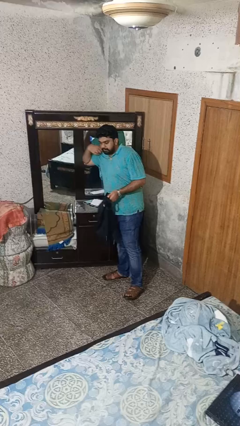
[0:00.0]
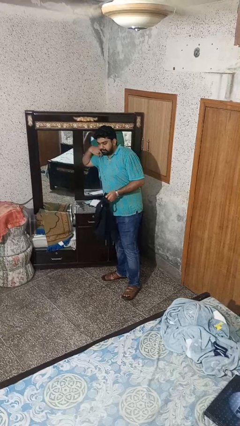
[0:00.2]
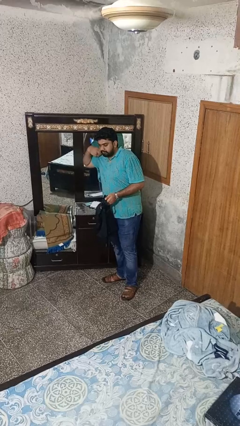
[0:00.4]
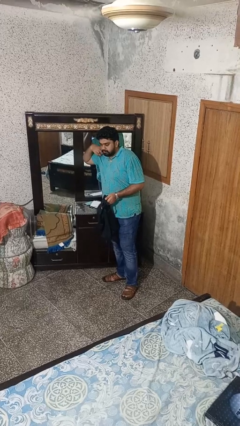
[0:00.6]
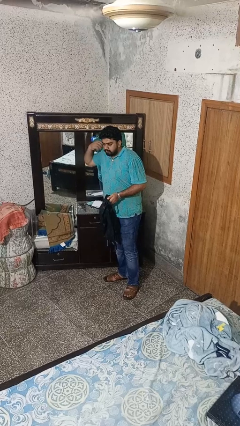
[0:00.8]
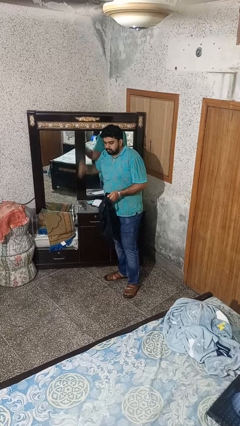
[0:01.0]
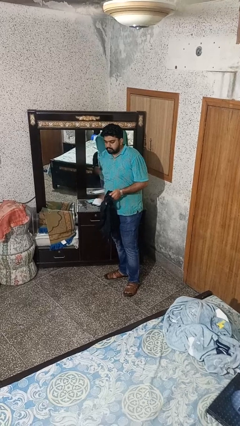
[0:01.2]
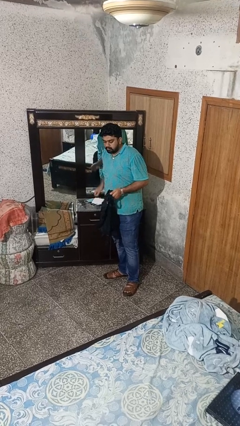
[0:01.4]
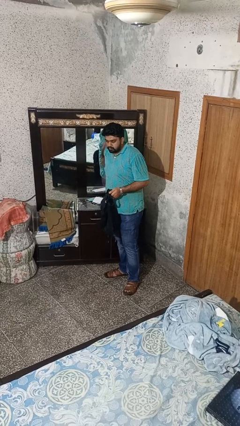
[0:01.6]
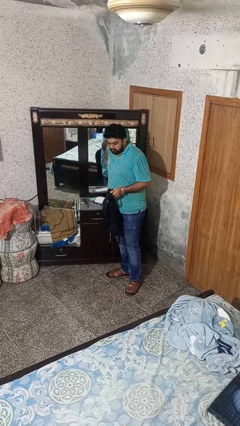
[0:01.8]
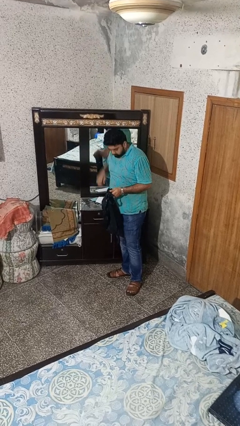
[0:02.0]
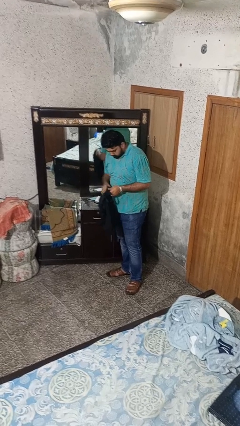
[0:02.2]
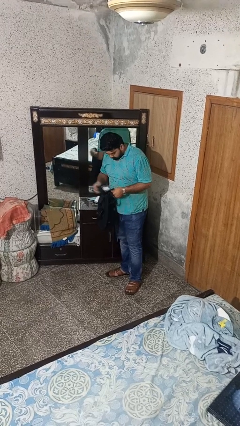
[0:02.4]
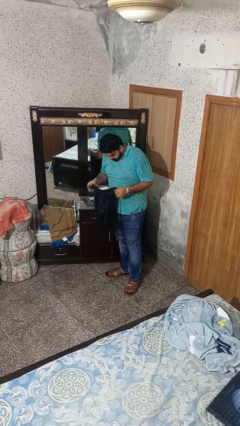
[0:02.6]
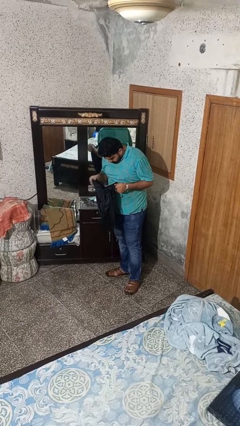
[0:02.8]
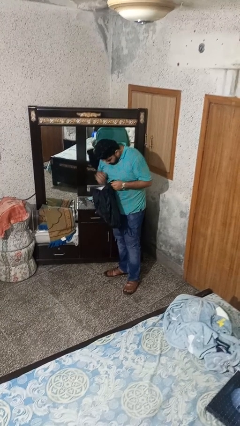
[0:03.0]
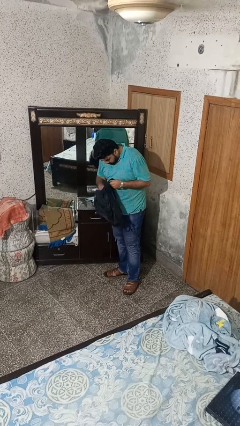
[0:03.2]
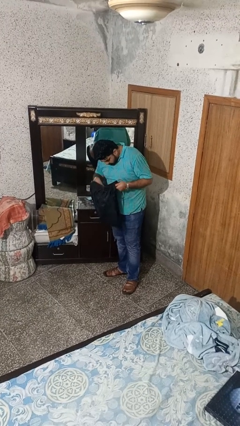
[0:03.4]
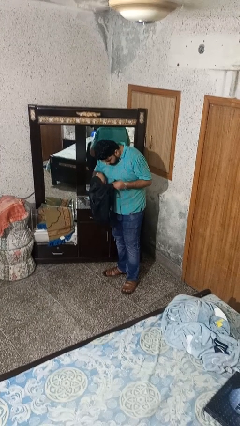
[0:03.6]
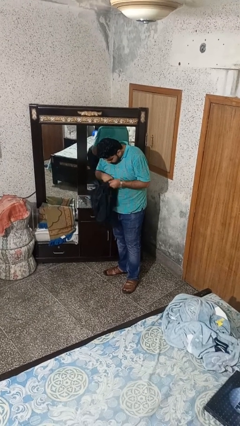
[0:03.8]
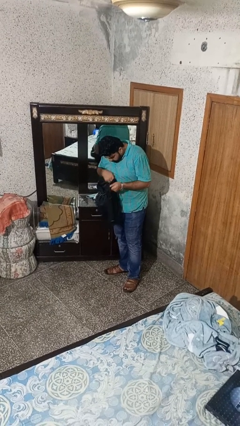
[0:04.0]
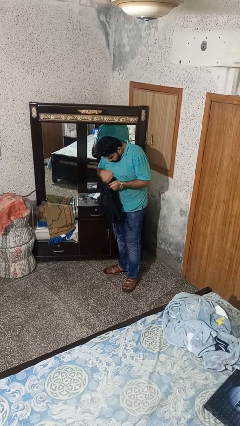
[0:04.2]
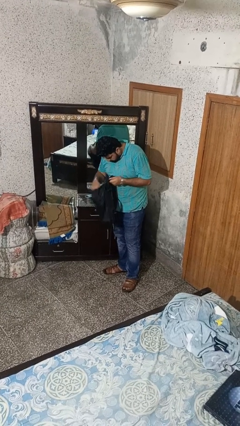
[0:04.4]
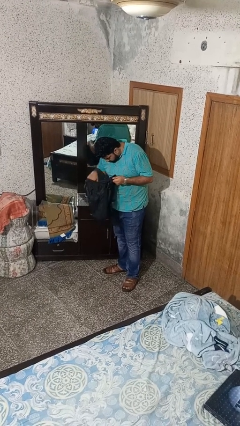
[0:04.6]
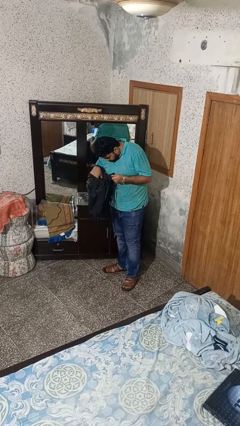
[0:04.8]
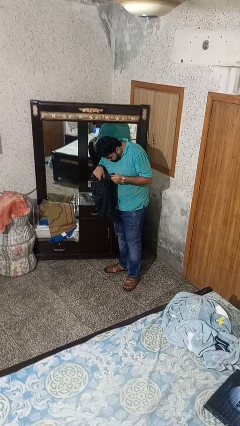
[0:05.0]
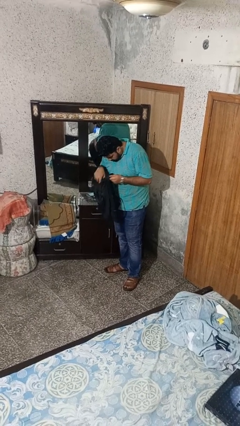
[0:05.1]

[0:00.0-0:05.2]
person searches in backpack

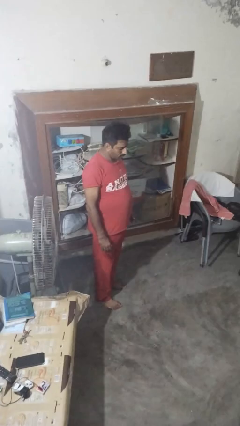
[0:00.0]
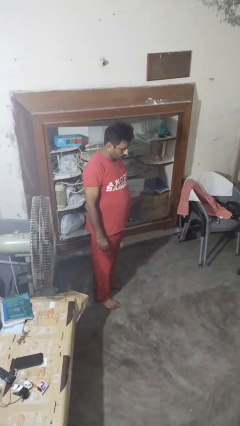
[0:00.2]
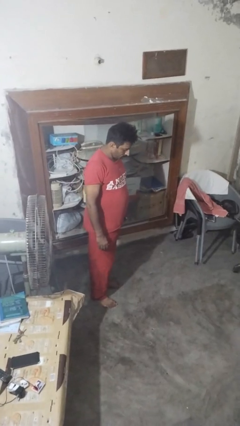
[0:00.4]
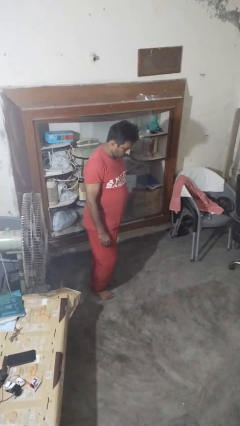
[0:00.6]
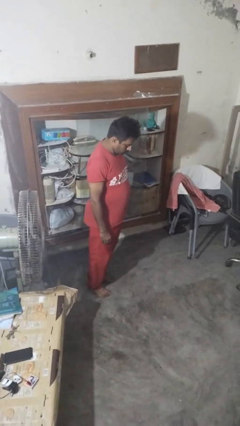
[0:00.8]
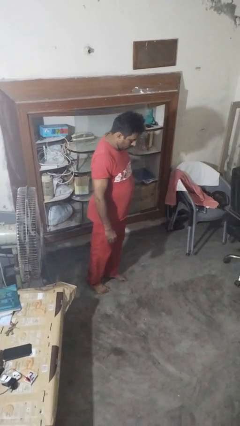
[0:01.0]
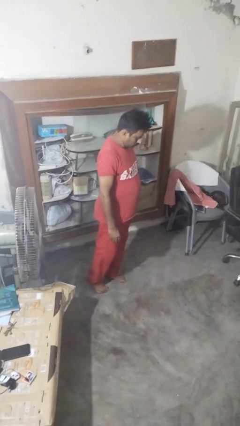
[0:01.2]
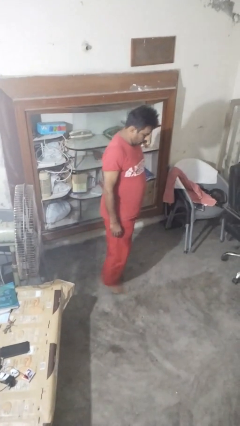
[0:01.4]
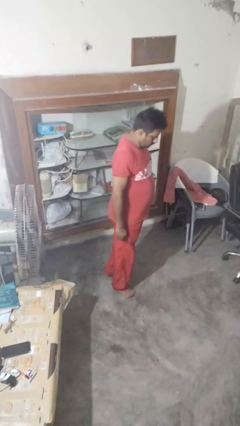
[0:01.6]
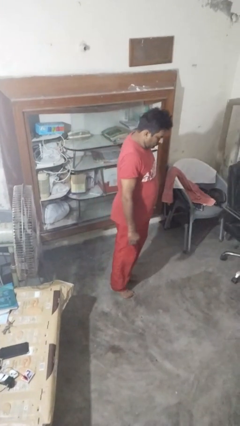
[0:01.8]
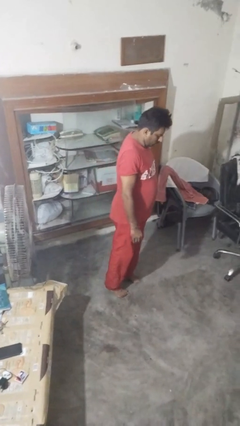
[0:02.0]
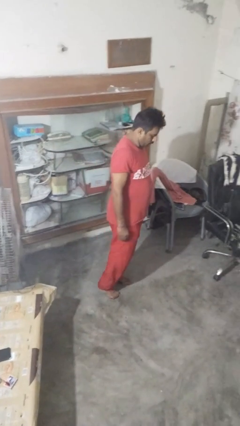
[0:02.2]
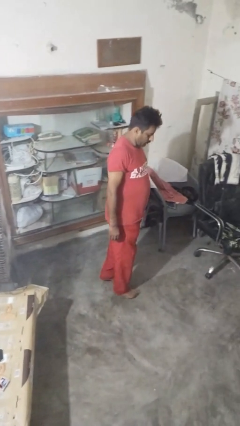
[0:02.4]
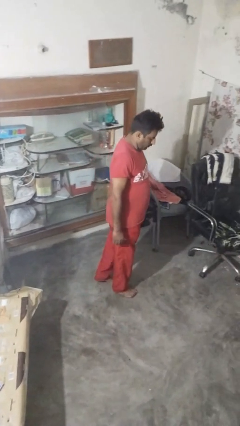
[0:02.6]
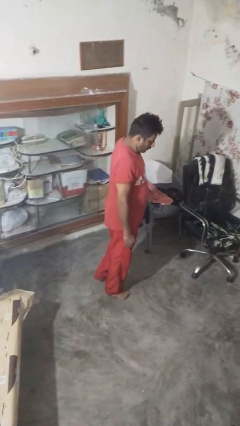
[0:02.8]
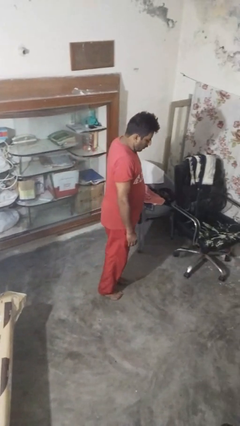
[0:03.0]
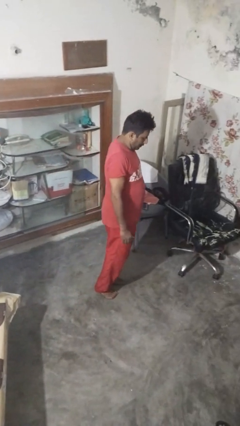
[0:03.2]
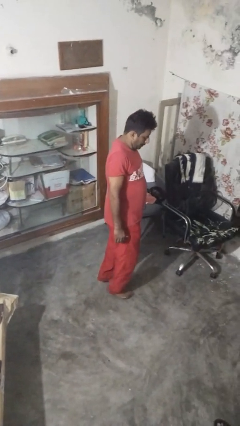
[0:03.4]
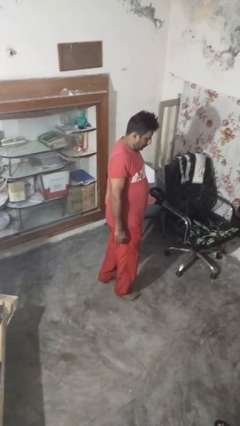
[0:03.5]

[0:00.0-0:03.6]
person walks tiptoe

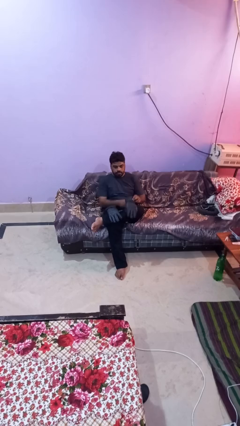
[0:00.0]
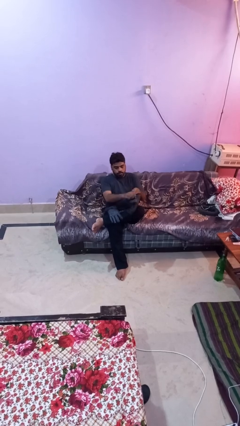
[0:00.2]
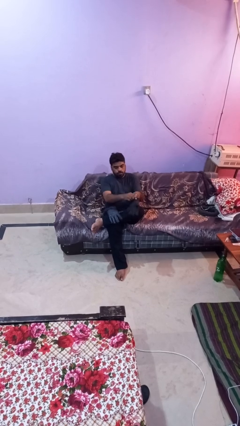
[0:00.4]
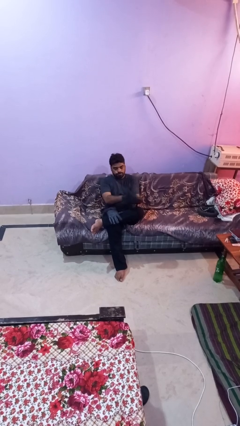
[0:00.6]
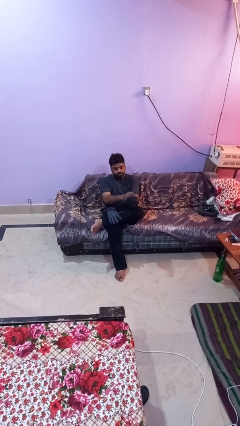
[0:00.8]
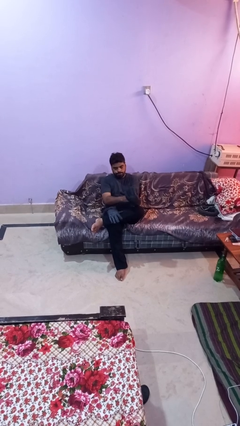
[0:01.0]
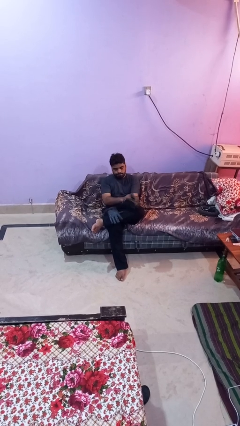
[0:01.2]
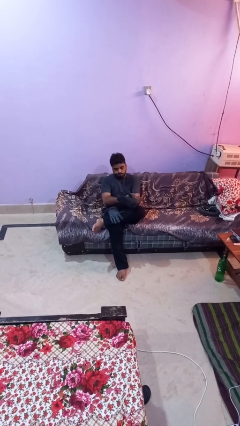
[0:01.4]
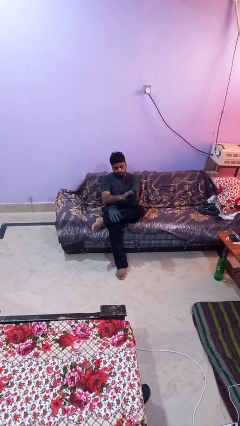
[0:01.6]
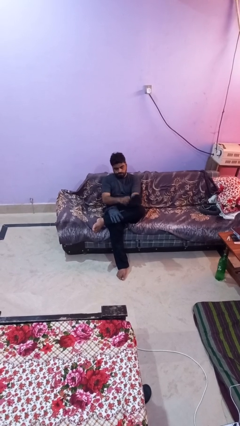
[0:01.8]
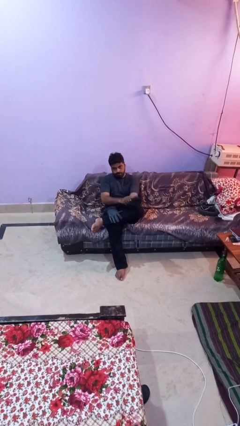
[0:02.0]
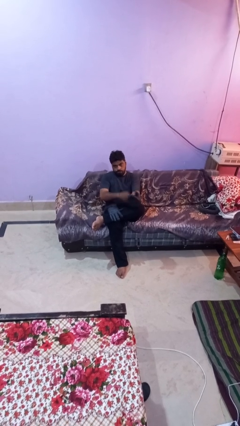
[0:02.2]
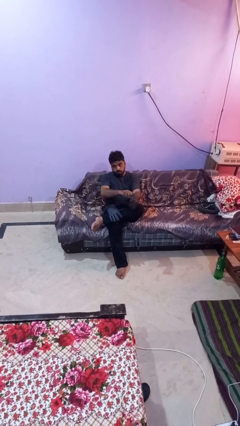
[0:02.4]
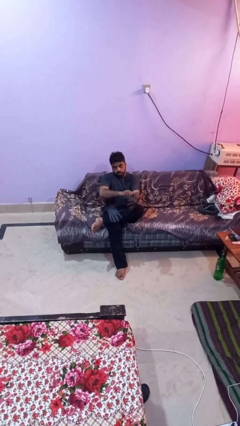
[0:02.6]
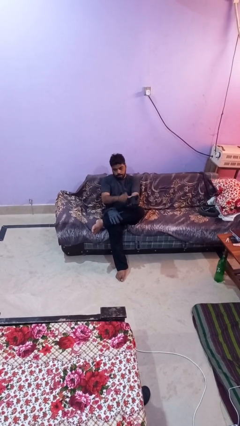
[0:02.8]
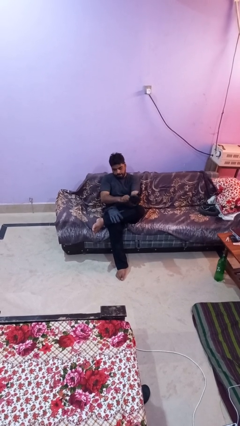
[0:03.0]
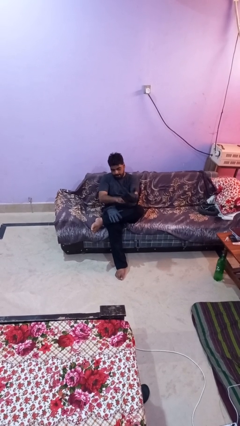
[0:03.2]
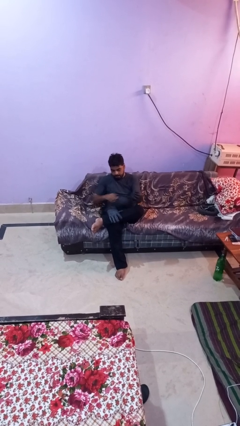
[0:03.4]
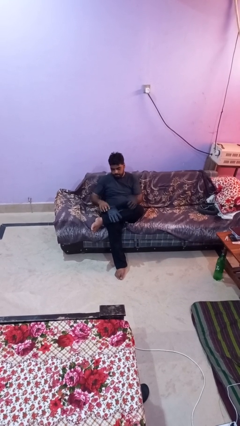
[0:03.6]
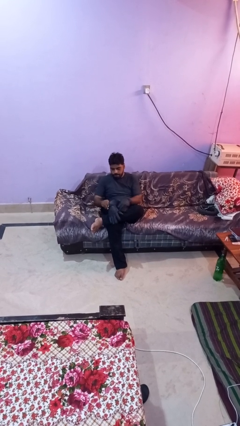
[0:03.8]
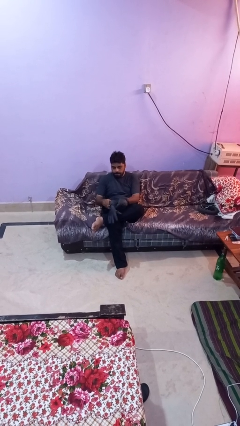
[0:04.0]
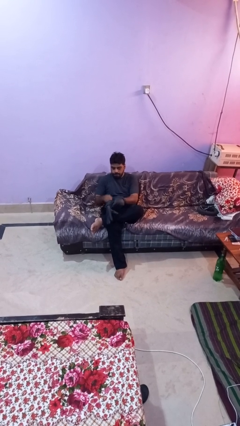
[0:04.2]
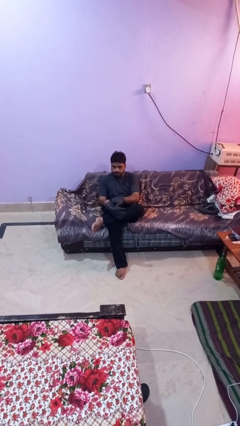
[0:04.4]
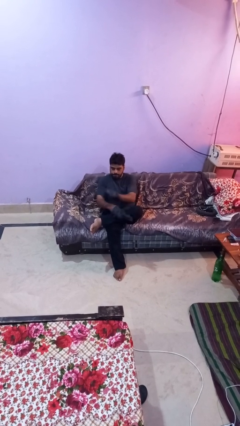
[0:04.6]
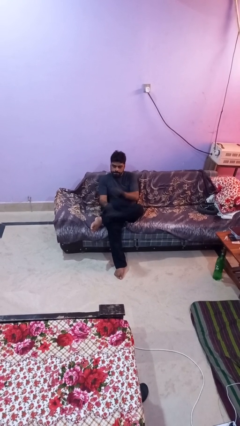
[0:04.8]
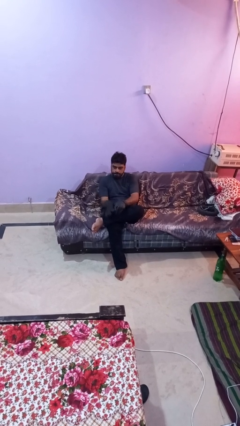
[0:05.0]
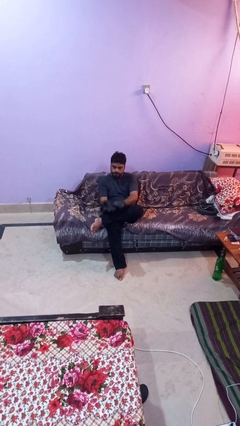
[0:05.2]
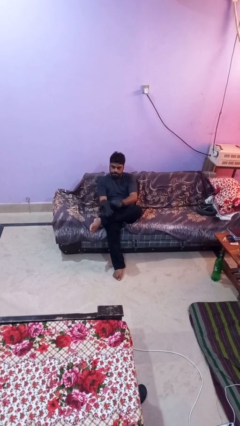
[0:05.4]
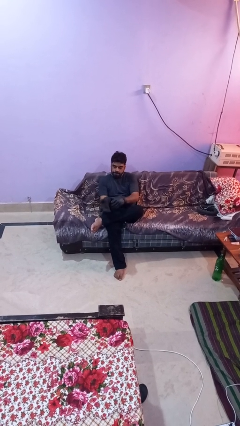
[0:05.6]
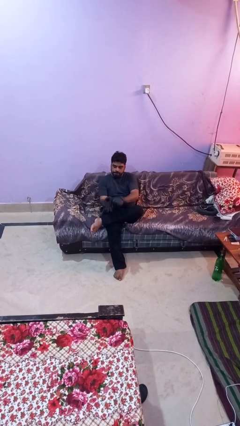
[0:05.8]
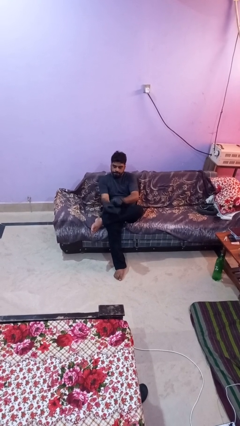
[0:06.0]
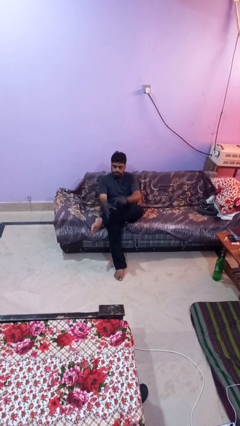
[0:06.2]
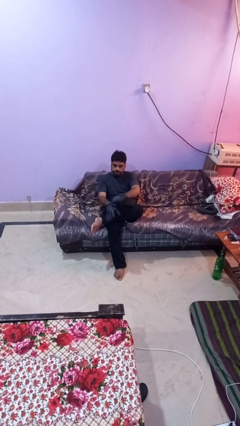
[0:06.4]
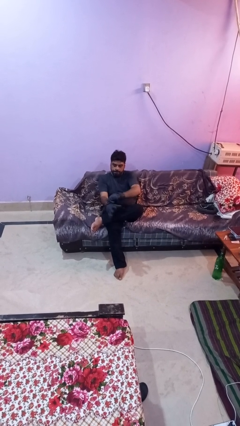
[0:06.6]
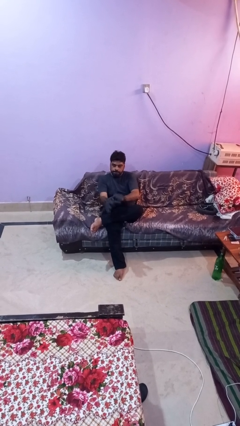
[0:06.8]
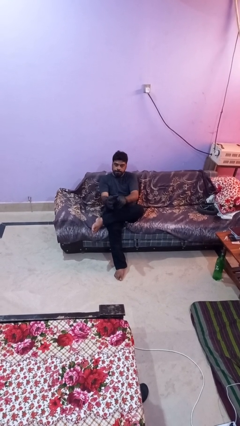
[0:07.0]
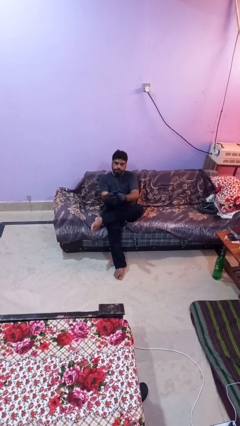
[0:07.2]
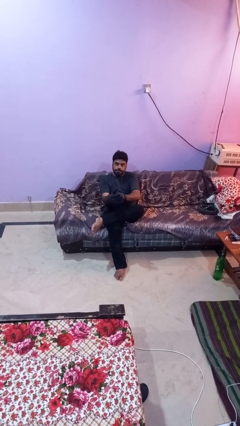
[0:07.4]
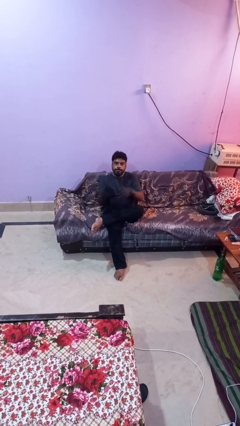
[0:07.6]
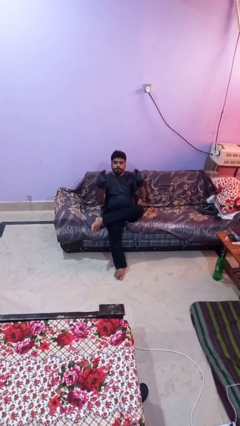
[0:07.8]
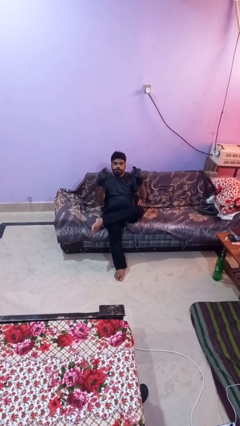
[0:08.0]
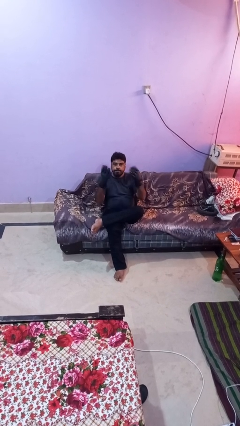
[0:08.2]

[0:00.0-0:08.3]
person puts on gloves

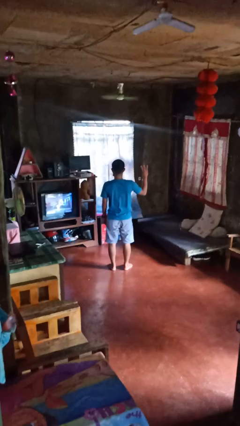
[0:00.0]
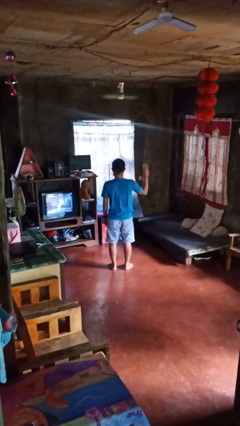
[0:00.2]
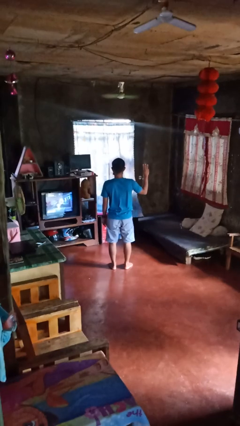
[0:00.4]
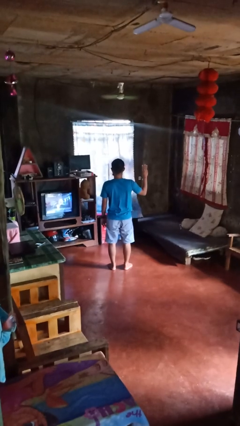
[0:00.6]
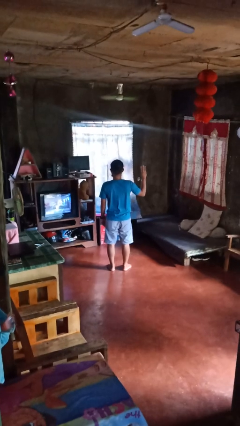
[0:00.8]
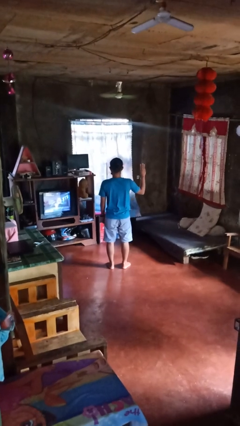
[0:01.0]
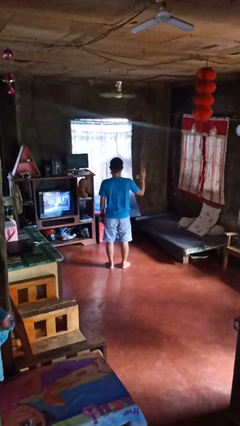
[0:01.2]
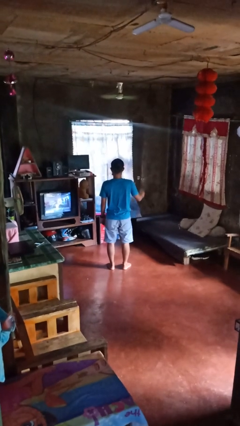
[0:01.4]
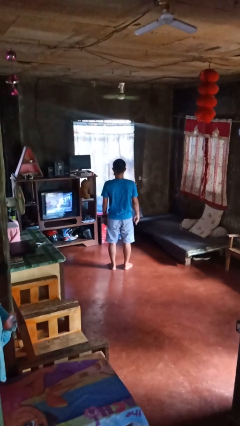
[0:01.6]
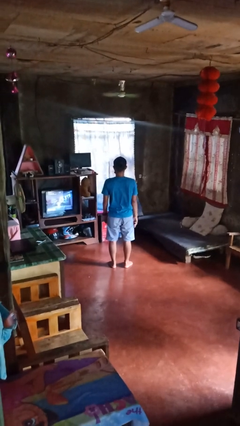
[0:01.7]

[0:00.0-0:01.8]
person gestures number three
